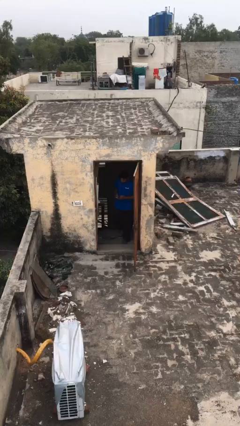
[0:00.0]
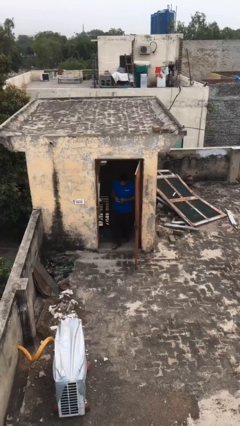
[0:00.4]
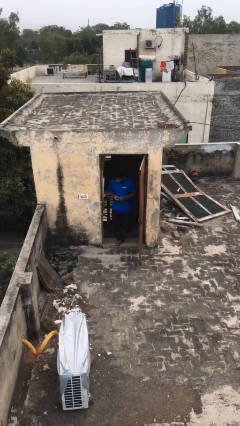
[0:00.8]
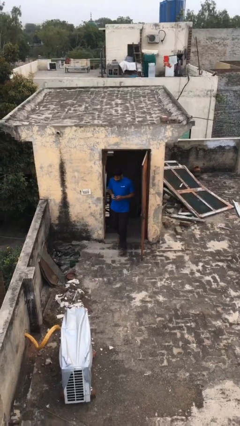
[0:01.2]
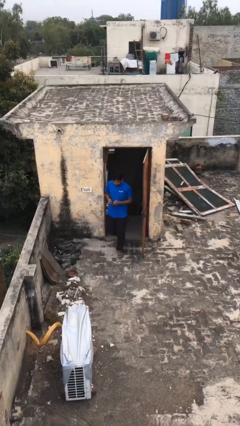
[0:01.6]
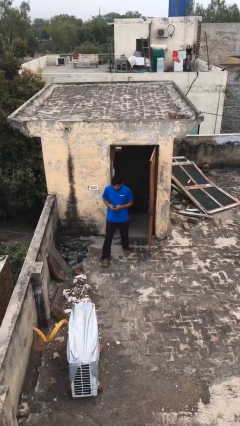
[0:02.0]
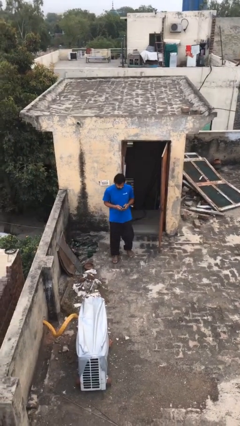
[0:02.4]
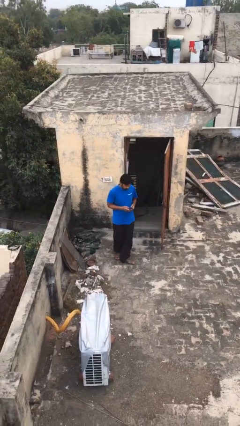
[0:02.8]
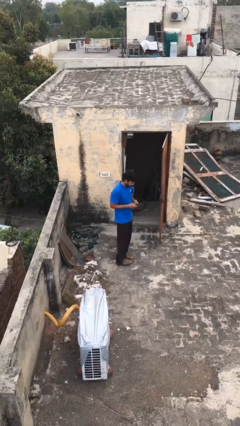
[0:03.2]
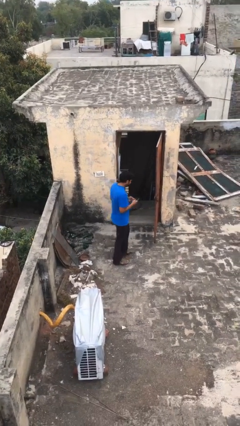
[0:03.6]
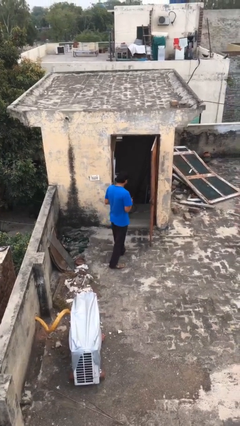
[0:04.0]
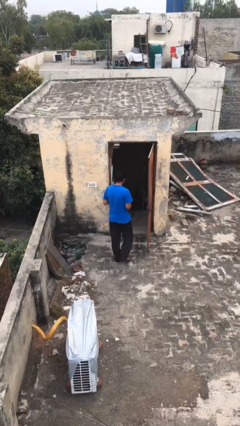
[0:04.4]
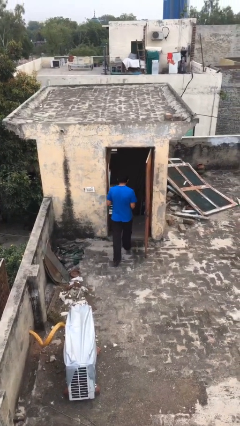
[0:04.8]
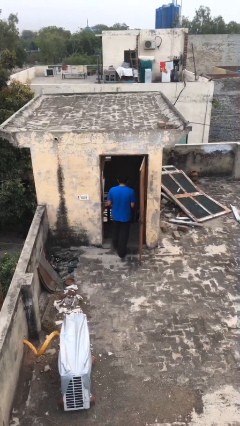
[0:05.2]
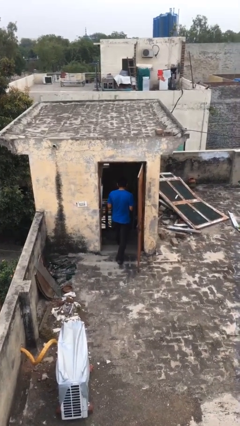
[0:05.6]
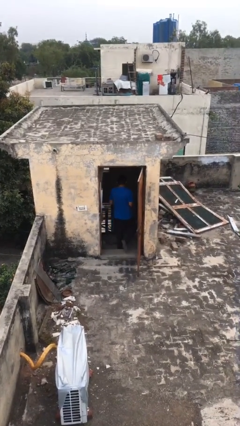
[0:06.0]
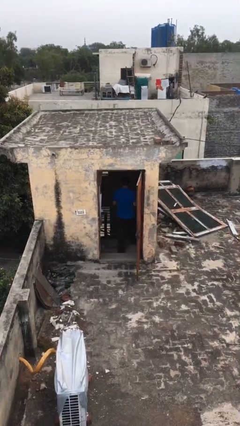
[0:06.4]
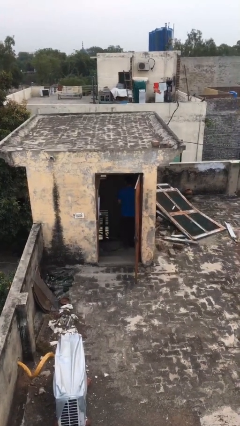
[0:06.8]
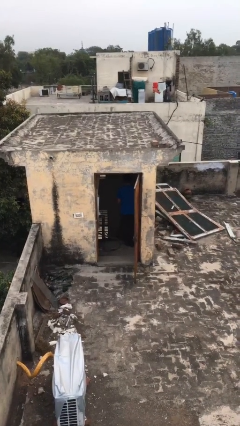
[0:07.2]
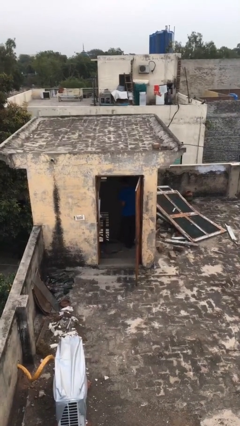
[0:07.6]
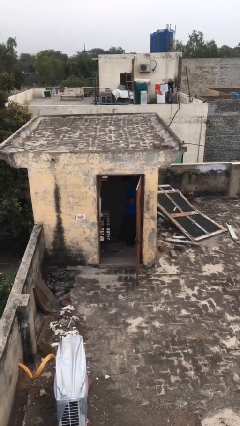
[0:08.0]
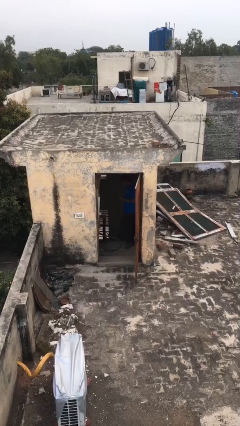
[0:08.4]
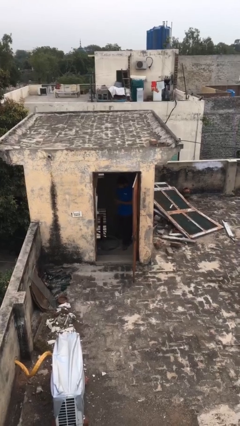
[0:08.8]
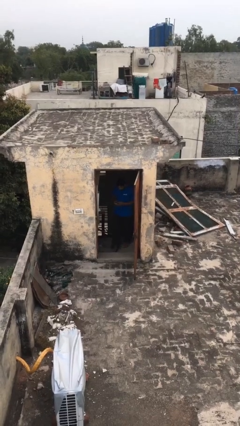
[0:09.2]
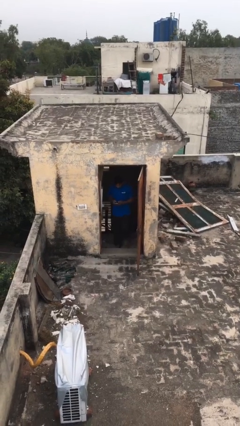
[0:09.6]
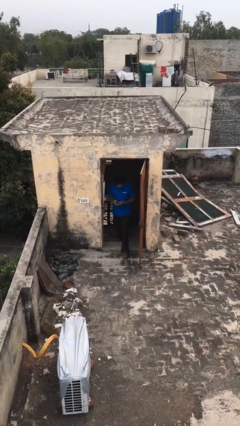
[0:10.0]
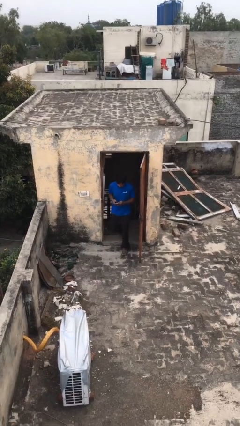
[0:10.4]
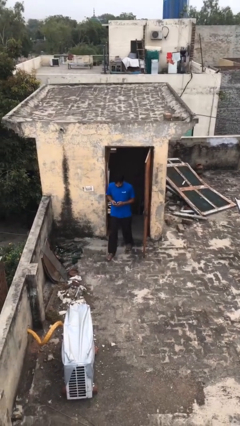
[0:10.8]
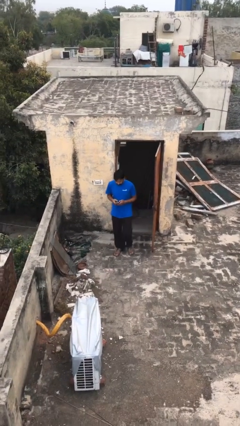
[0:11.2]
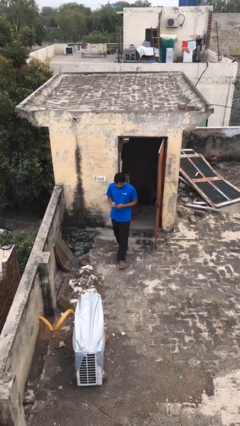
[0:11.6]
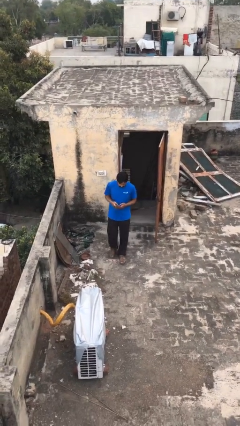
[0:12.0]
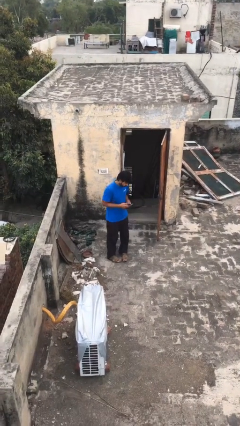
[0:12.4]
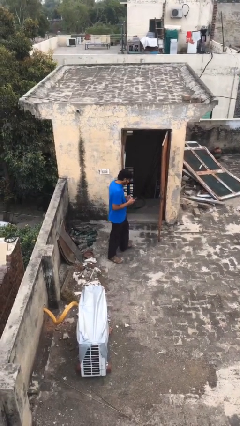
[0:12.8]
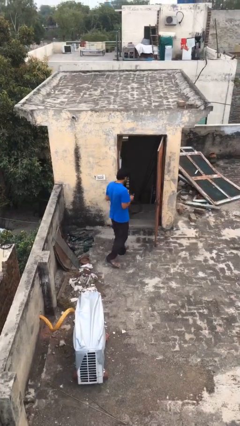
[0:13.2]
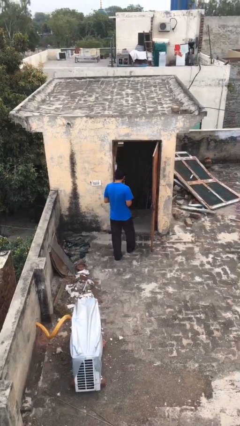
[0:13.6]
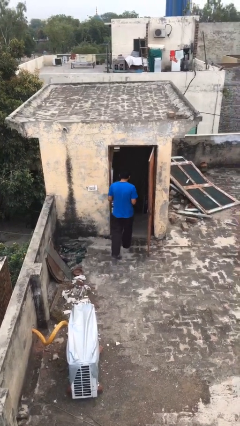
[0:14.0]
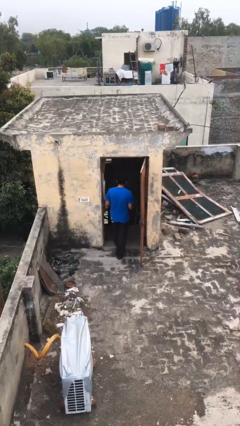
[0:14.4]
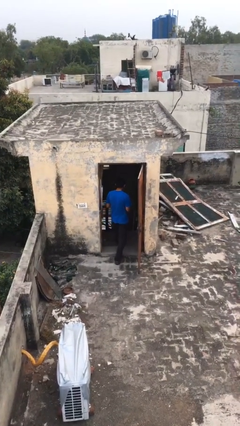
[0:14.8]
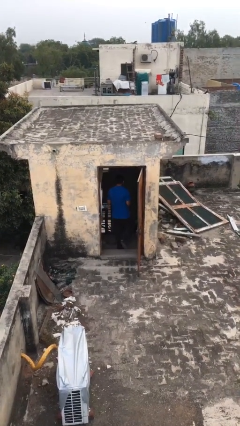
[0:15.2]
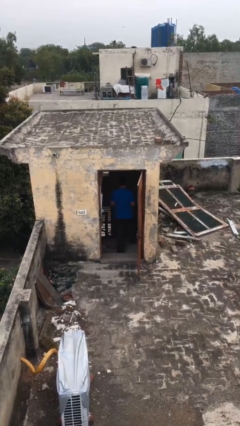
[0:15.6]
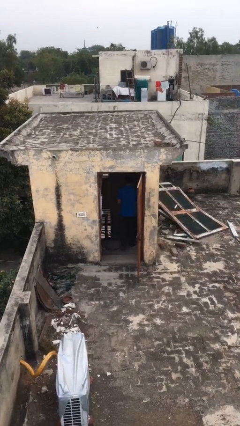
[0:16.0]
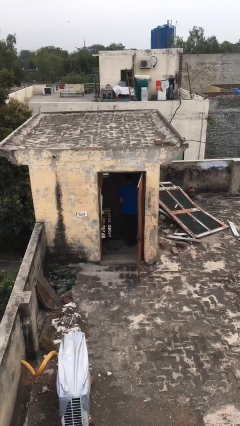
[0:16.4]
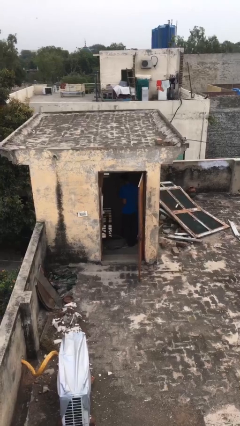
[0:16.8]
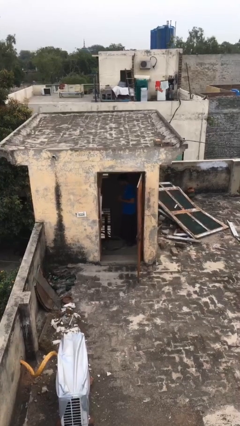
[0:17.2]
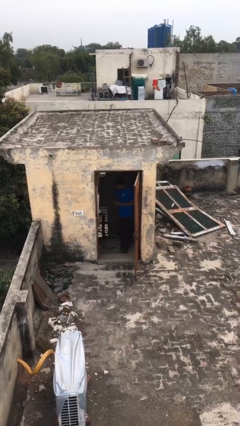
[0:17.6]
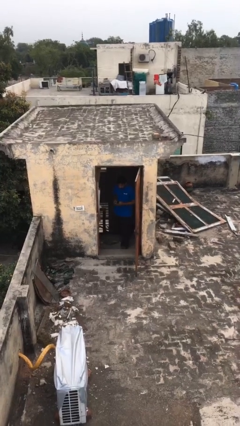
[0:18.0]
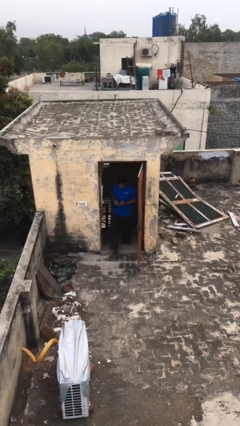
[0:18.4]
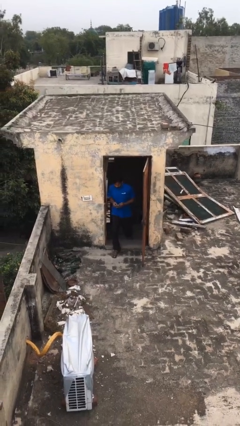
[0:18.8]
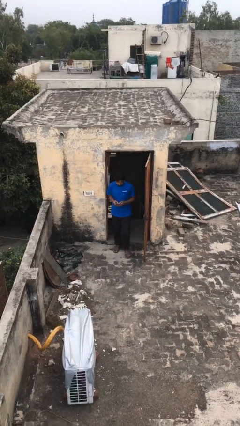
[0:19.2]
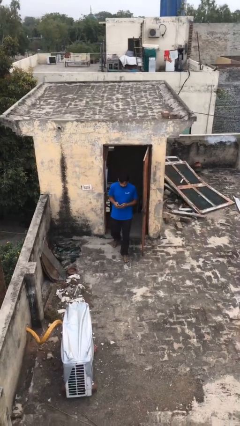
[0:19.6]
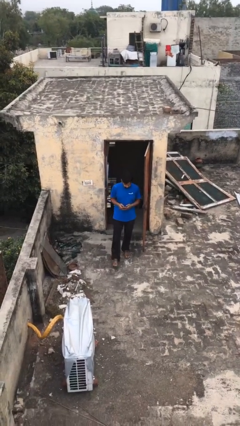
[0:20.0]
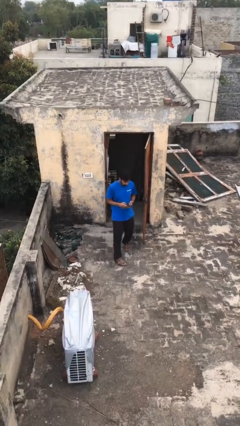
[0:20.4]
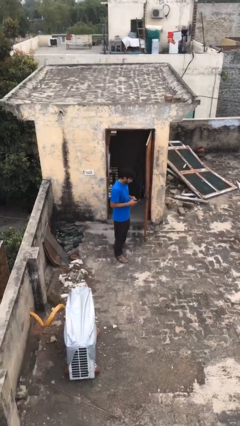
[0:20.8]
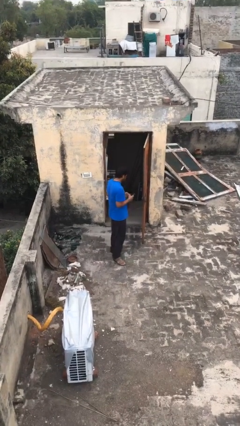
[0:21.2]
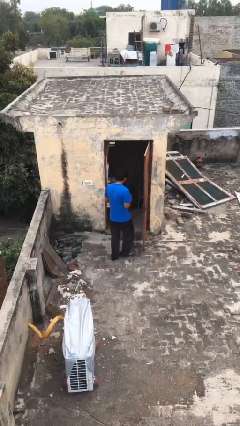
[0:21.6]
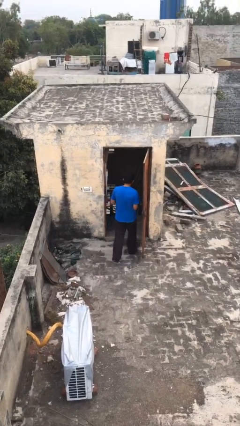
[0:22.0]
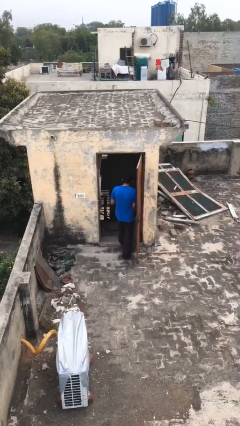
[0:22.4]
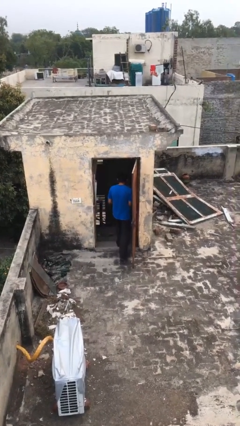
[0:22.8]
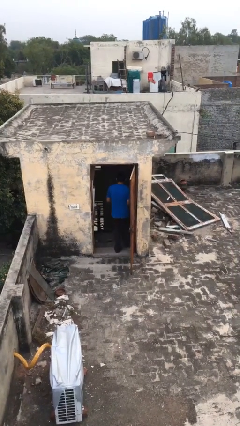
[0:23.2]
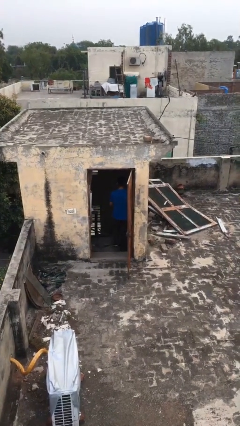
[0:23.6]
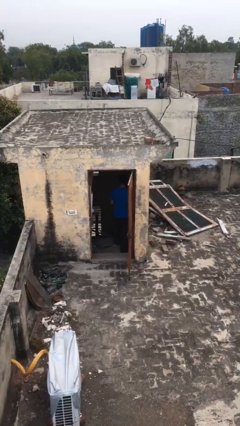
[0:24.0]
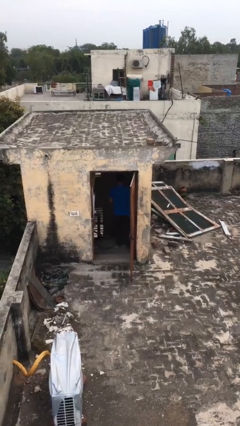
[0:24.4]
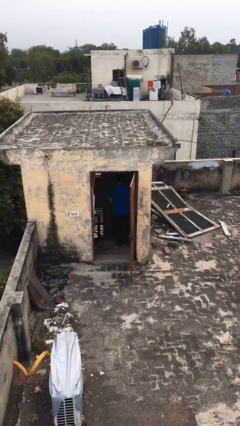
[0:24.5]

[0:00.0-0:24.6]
person texts on phone

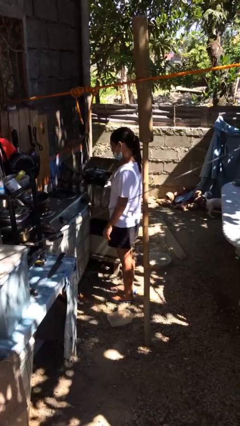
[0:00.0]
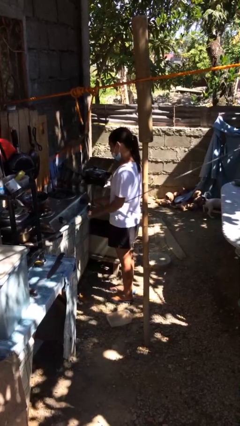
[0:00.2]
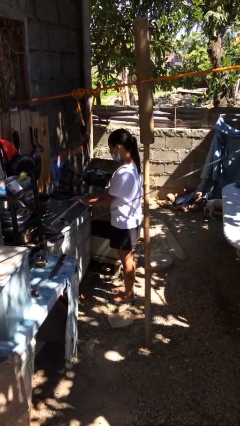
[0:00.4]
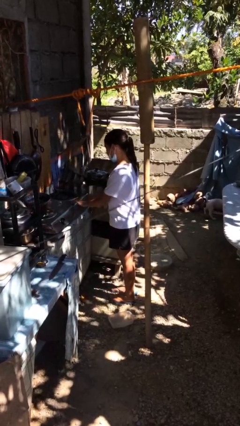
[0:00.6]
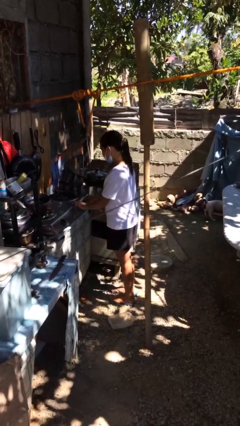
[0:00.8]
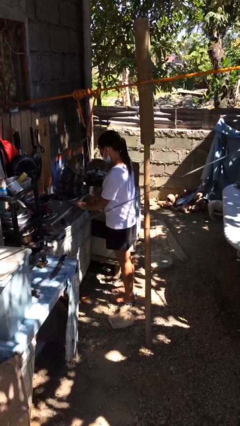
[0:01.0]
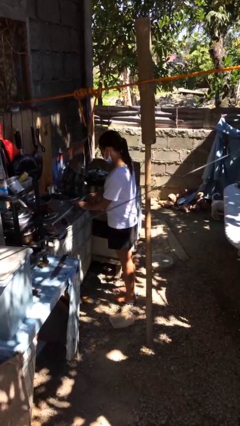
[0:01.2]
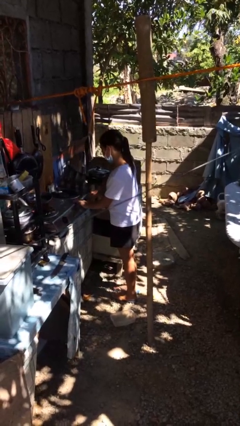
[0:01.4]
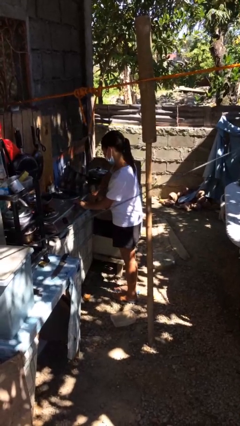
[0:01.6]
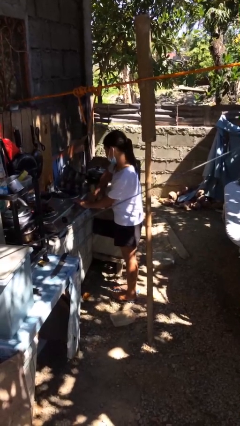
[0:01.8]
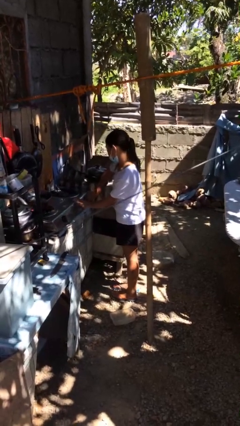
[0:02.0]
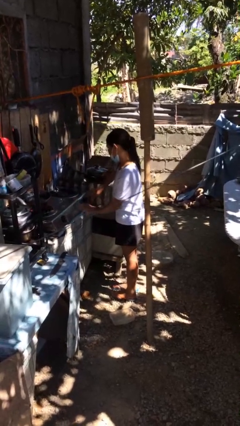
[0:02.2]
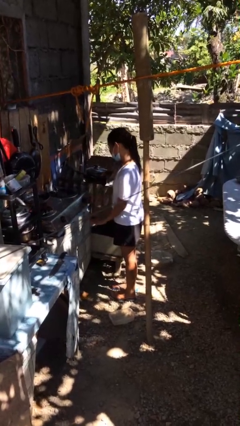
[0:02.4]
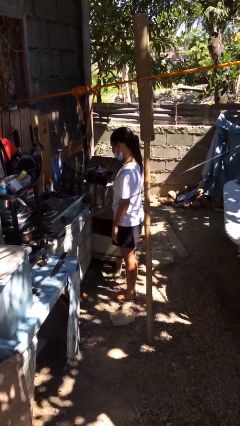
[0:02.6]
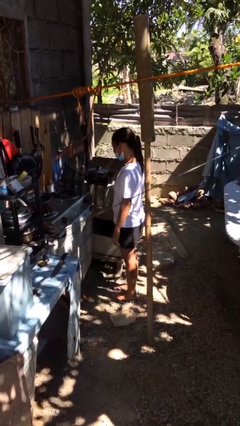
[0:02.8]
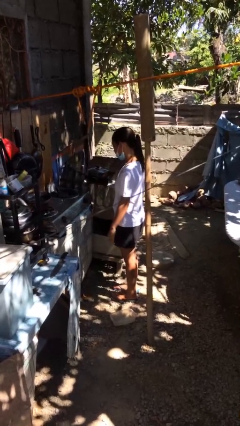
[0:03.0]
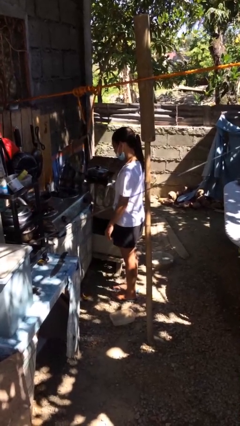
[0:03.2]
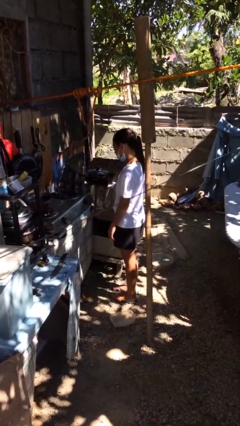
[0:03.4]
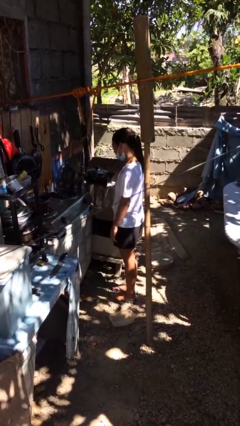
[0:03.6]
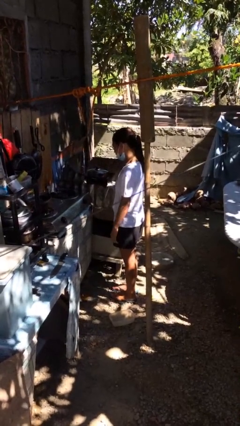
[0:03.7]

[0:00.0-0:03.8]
person turns on stovetop

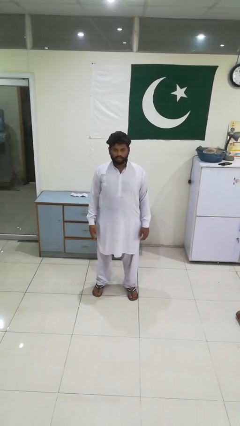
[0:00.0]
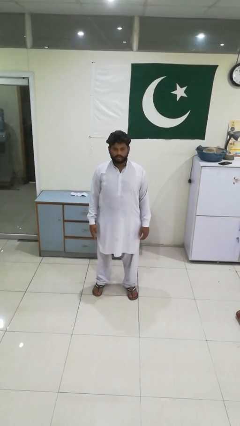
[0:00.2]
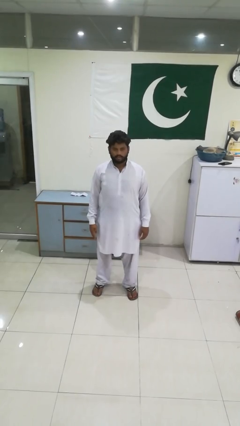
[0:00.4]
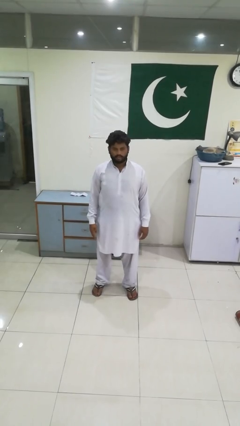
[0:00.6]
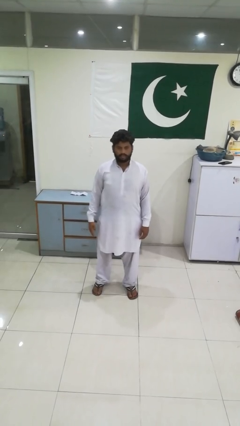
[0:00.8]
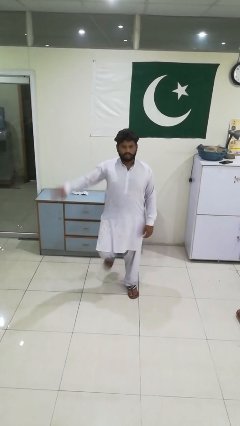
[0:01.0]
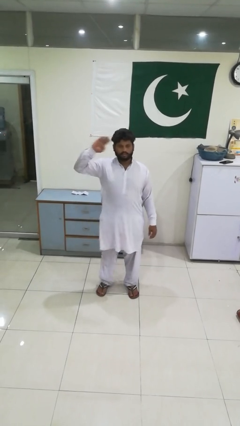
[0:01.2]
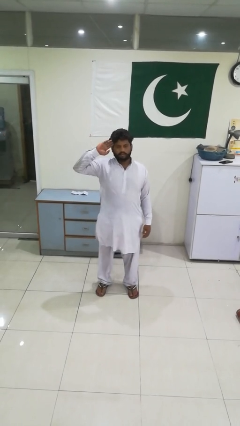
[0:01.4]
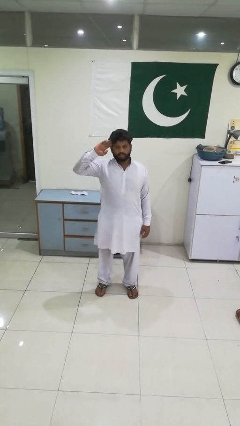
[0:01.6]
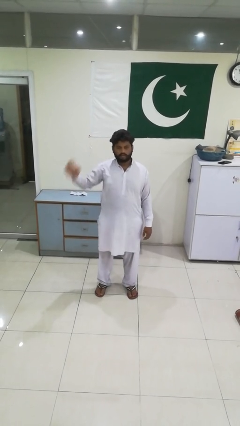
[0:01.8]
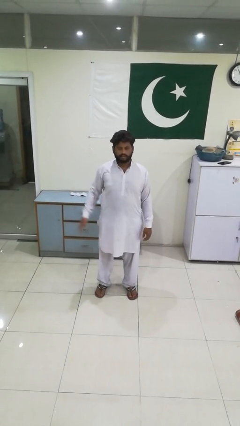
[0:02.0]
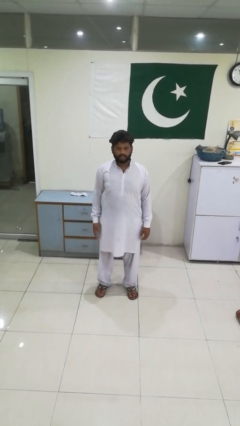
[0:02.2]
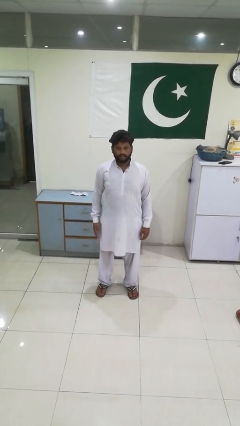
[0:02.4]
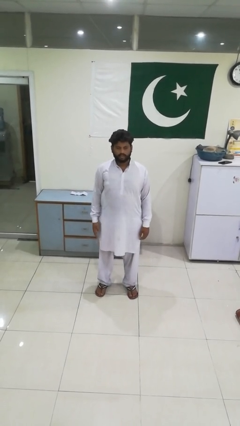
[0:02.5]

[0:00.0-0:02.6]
person salutes
